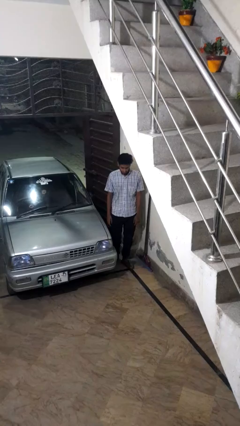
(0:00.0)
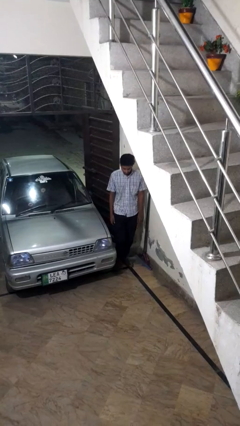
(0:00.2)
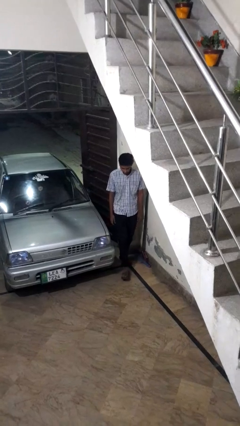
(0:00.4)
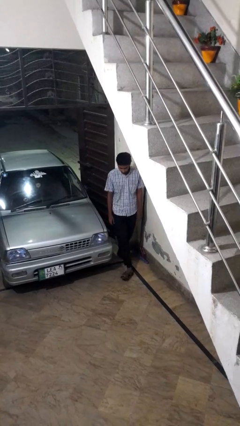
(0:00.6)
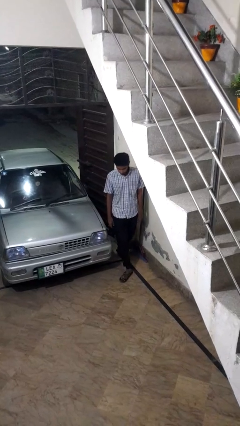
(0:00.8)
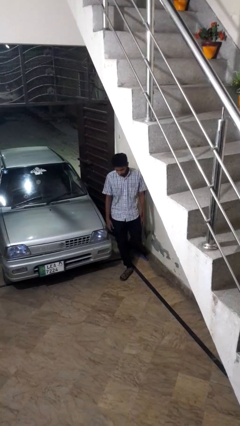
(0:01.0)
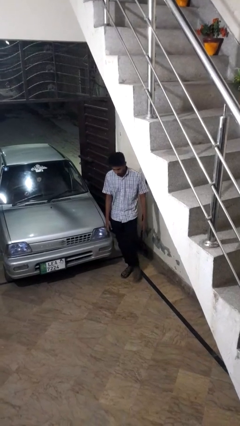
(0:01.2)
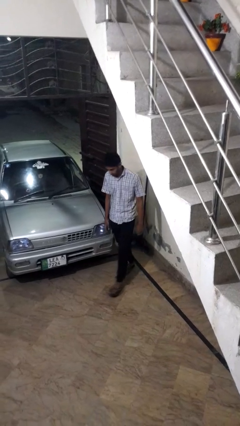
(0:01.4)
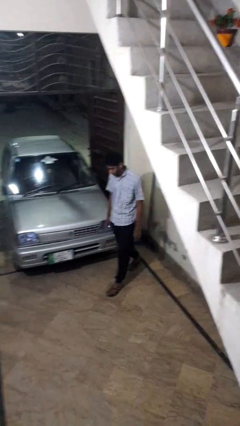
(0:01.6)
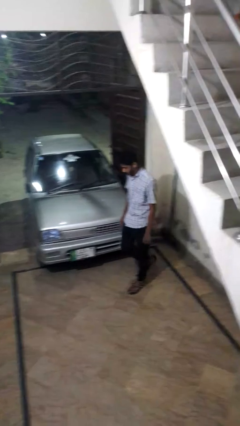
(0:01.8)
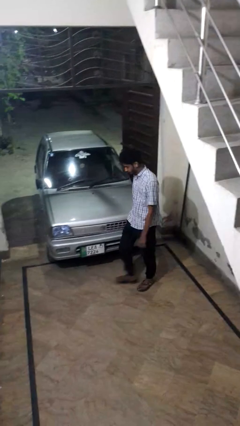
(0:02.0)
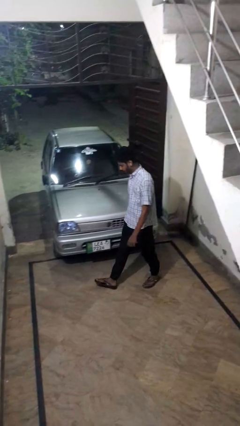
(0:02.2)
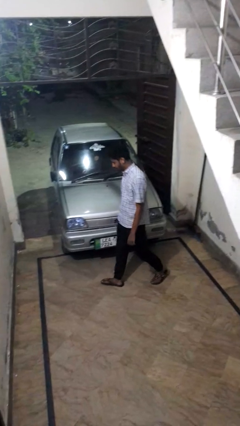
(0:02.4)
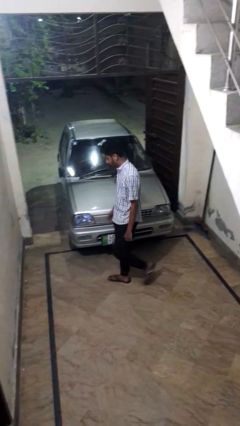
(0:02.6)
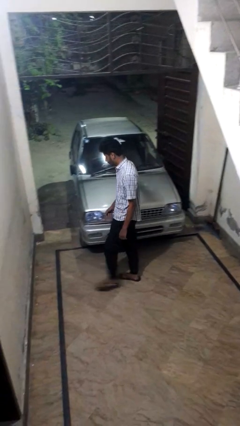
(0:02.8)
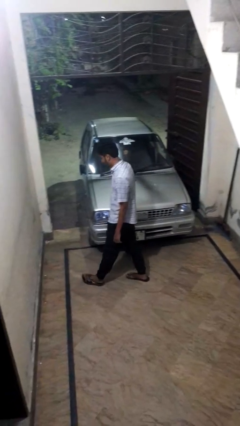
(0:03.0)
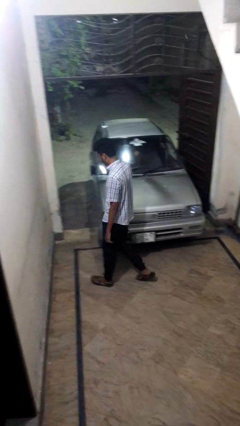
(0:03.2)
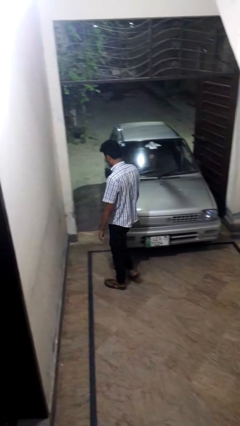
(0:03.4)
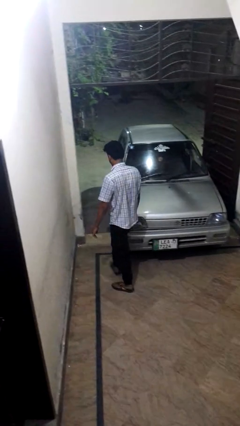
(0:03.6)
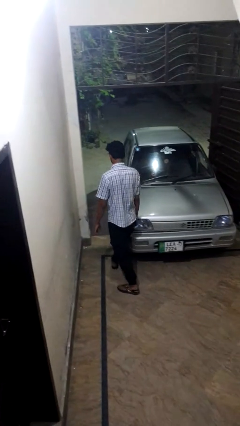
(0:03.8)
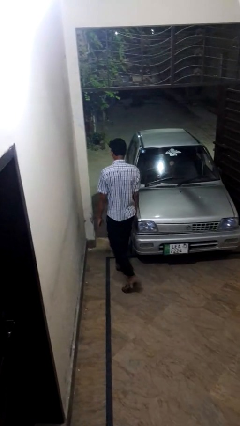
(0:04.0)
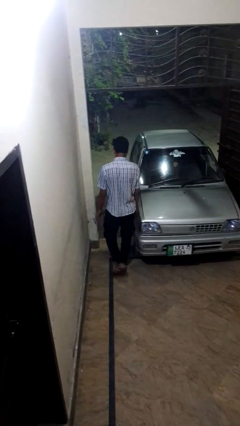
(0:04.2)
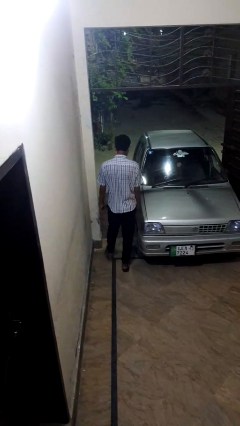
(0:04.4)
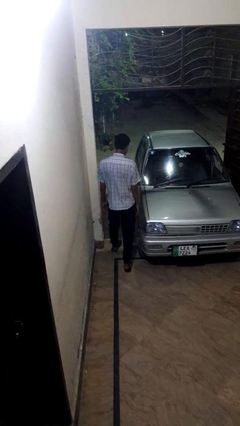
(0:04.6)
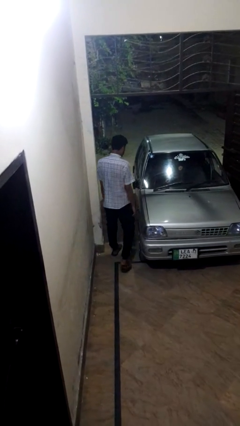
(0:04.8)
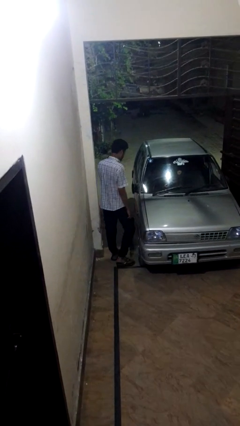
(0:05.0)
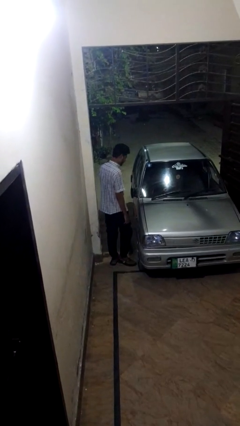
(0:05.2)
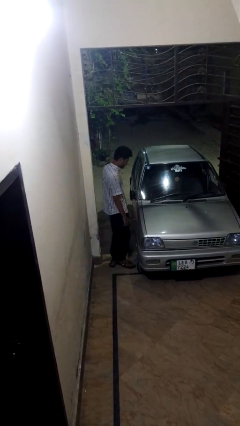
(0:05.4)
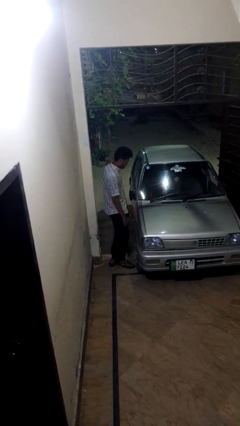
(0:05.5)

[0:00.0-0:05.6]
person walks around car

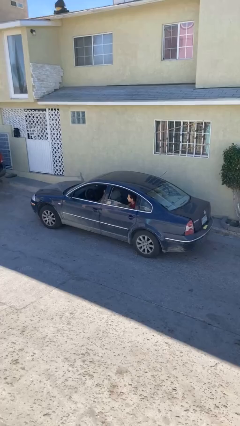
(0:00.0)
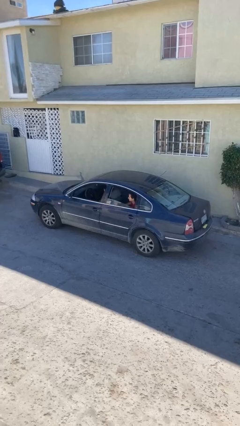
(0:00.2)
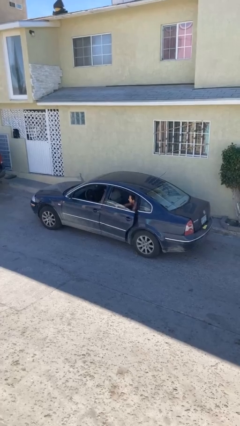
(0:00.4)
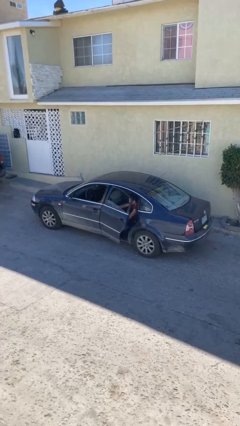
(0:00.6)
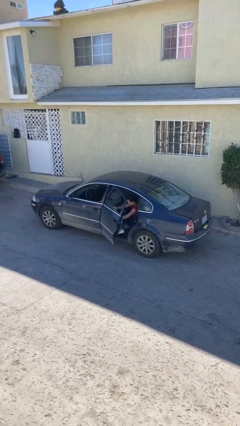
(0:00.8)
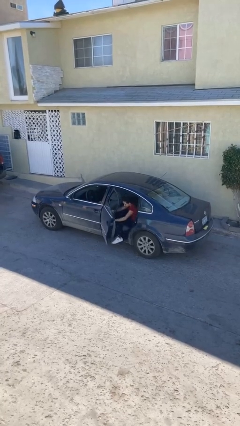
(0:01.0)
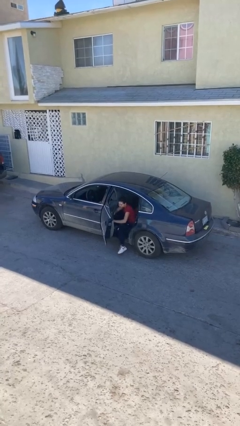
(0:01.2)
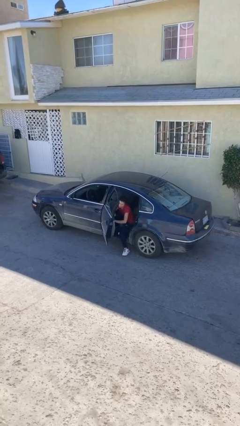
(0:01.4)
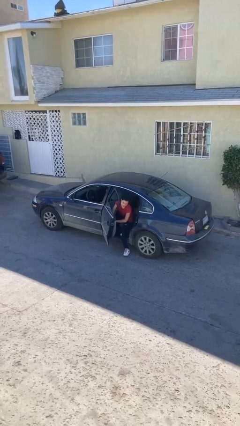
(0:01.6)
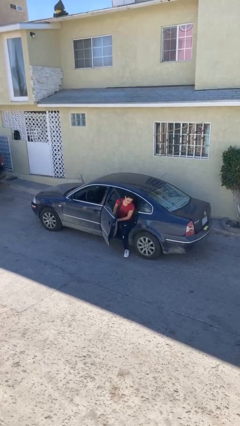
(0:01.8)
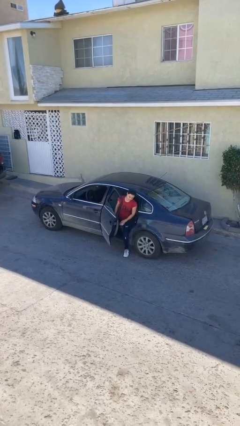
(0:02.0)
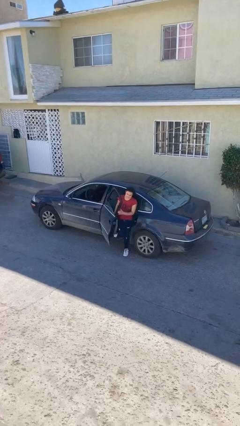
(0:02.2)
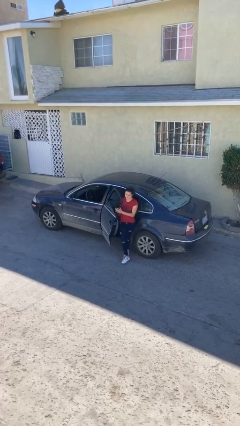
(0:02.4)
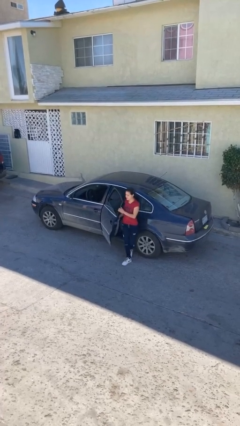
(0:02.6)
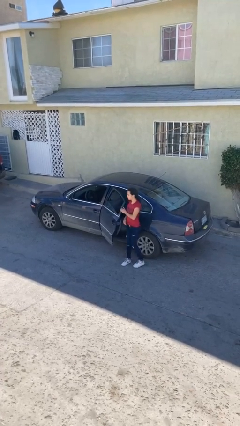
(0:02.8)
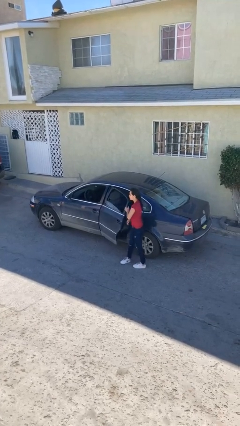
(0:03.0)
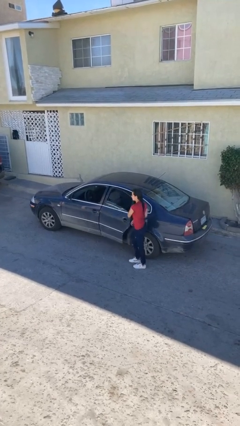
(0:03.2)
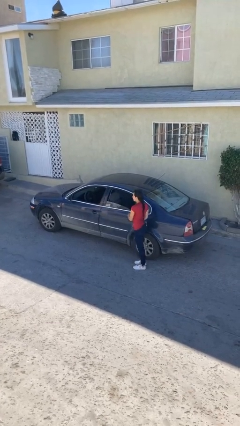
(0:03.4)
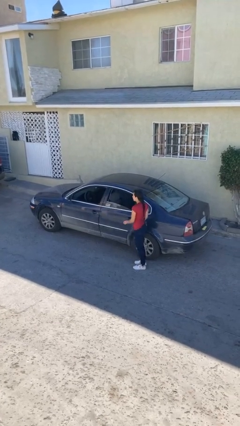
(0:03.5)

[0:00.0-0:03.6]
car drops off person

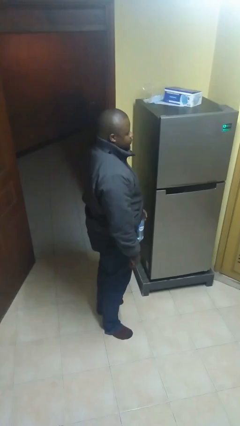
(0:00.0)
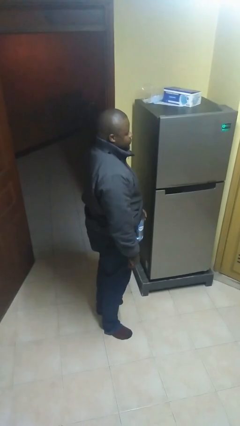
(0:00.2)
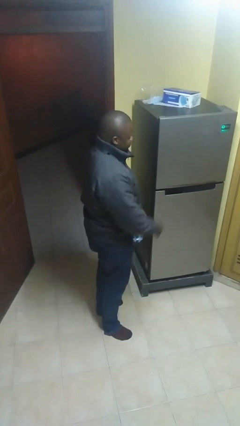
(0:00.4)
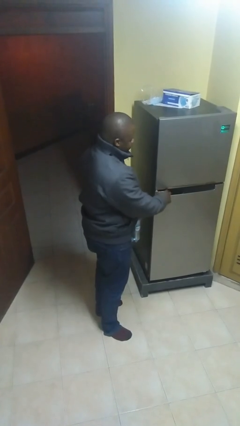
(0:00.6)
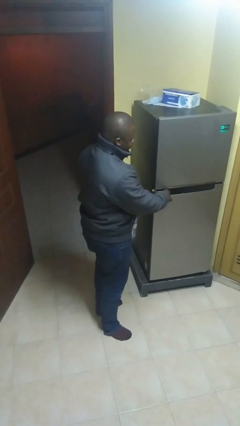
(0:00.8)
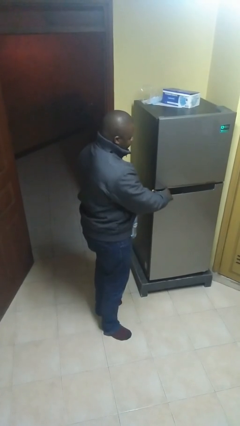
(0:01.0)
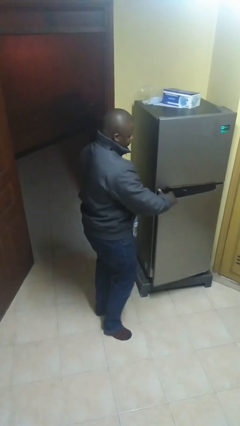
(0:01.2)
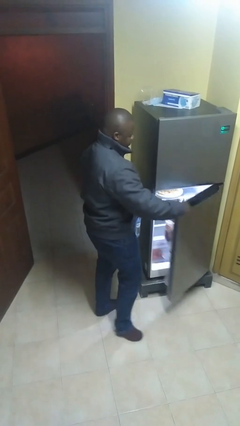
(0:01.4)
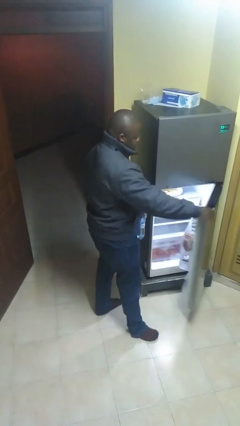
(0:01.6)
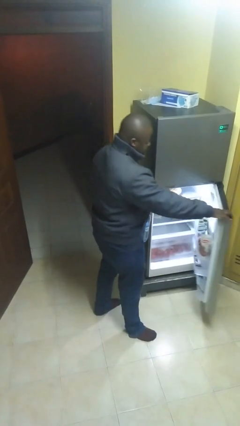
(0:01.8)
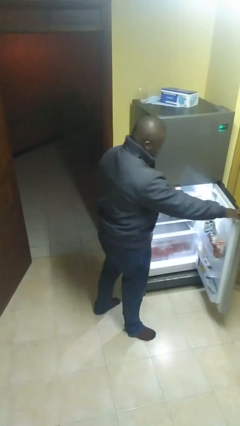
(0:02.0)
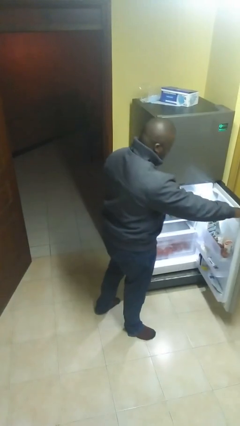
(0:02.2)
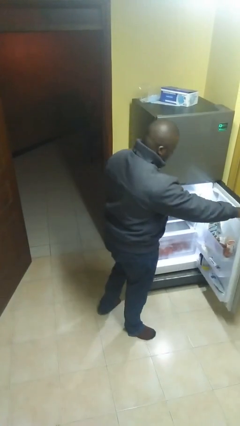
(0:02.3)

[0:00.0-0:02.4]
person opens refrigerator

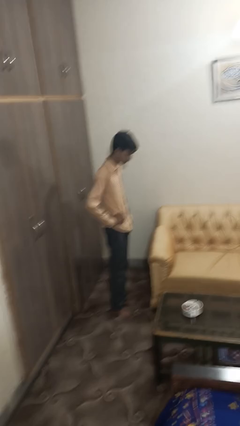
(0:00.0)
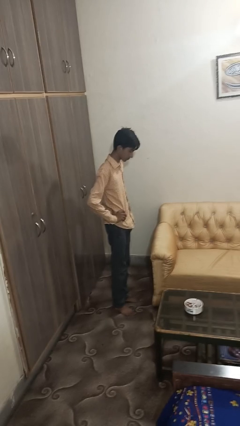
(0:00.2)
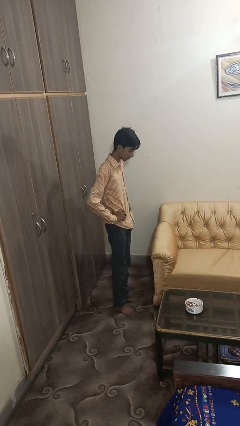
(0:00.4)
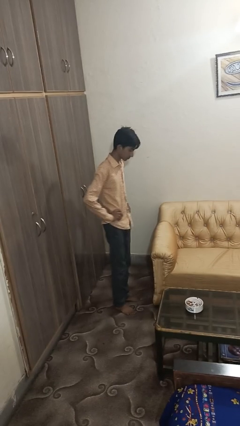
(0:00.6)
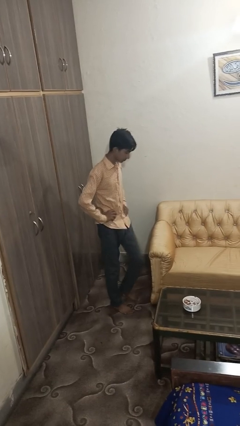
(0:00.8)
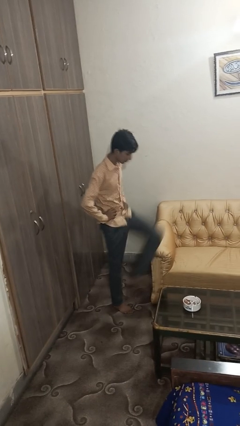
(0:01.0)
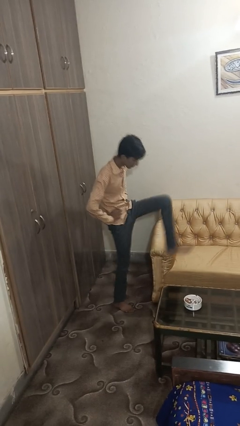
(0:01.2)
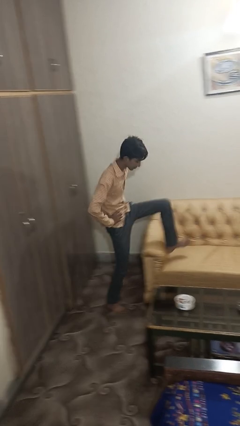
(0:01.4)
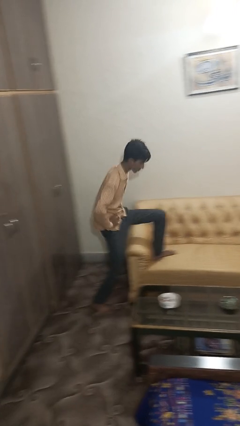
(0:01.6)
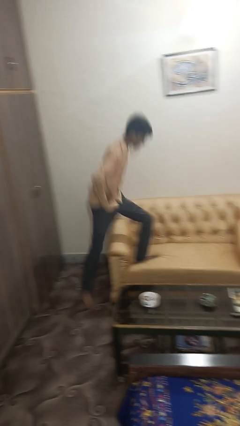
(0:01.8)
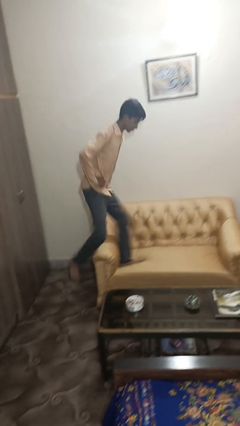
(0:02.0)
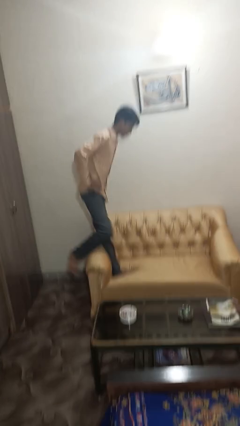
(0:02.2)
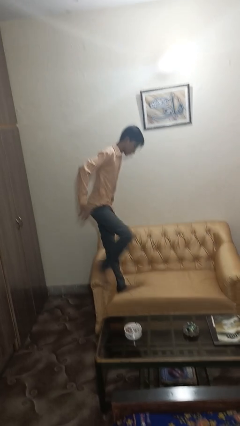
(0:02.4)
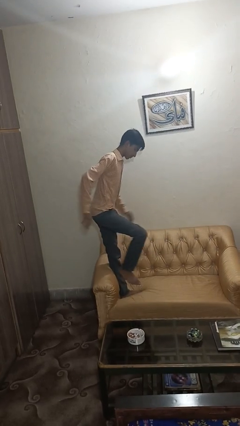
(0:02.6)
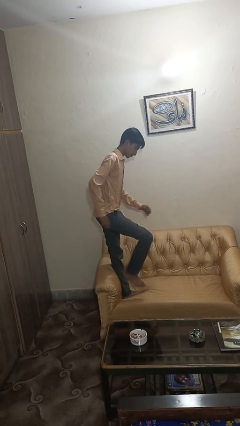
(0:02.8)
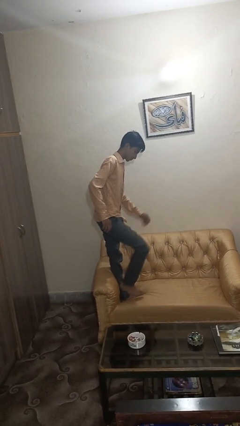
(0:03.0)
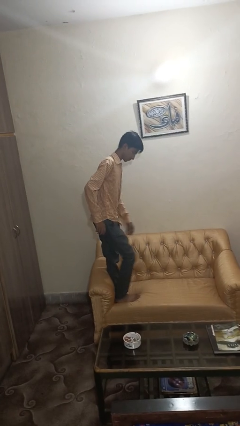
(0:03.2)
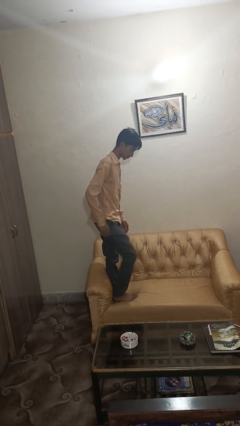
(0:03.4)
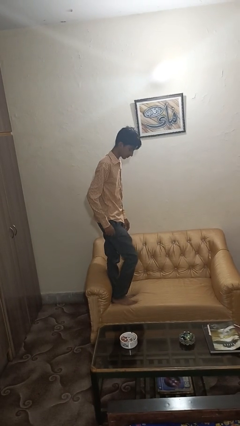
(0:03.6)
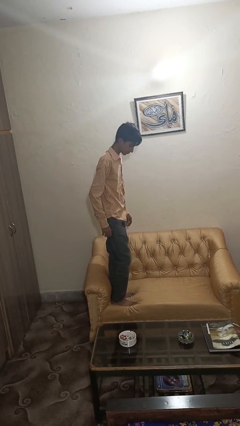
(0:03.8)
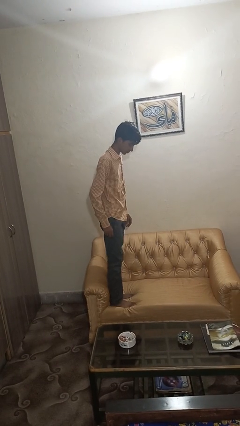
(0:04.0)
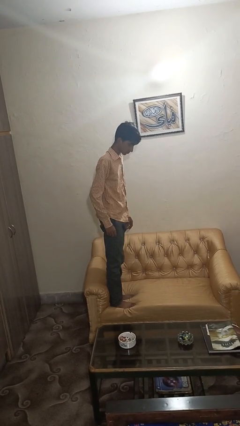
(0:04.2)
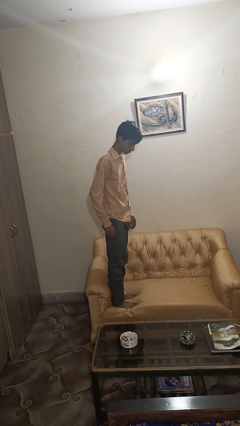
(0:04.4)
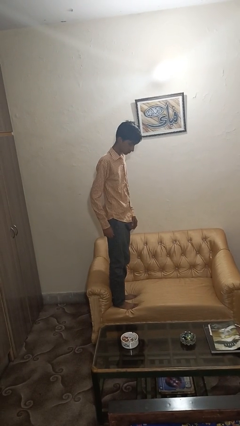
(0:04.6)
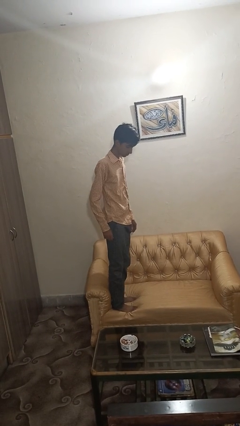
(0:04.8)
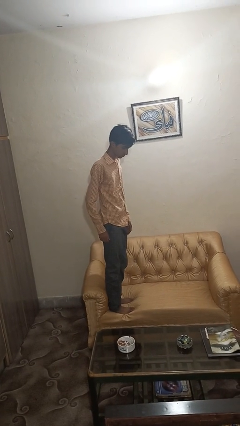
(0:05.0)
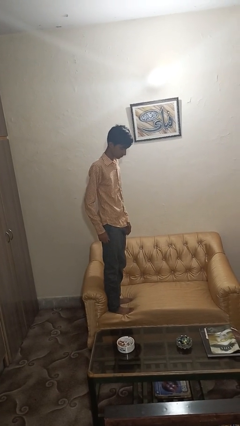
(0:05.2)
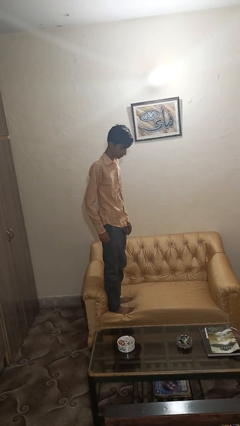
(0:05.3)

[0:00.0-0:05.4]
person climbs on couch

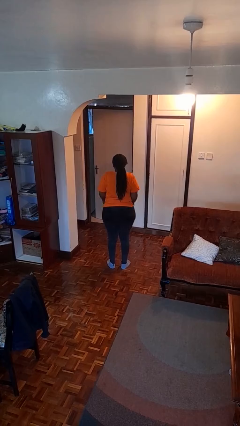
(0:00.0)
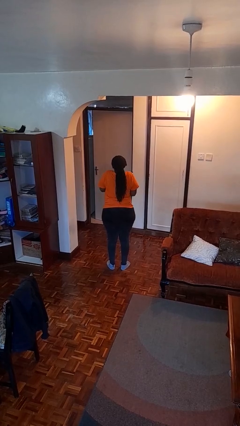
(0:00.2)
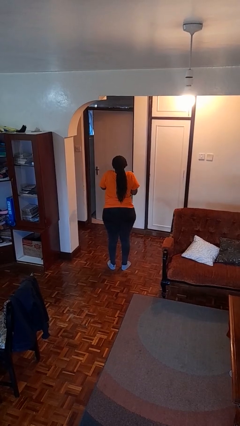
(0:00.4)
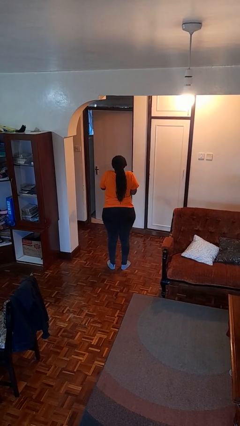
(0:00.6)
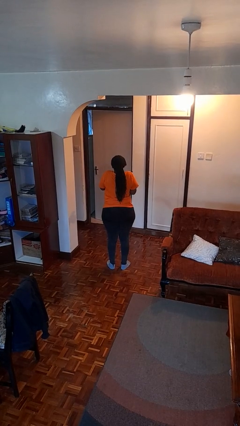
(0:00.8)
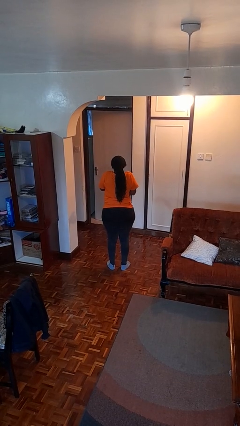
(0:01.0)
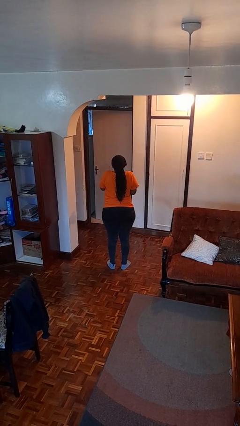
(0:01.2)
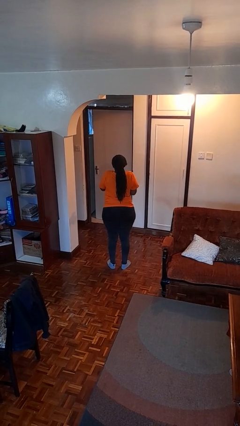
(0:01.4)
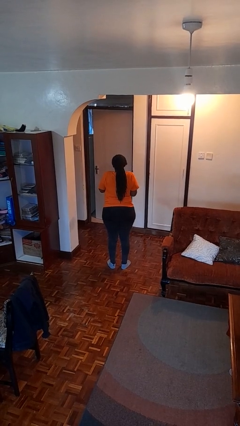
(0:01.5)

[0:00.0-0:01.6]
person shrugs
